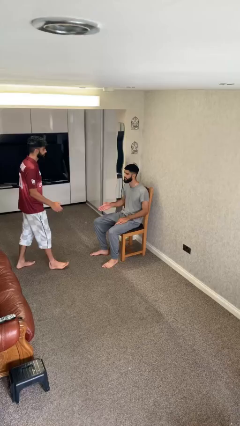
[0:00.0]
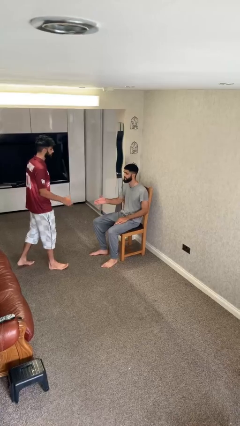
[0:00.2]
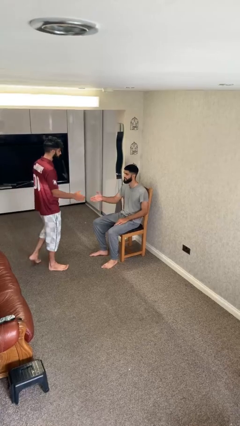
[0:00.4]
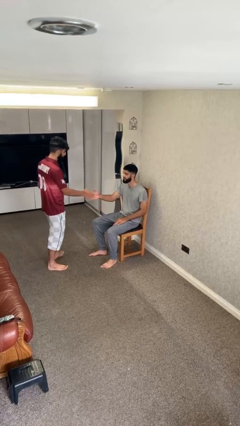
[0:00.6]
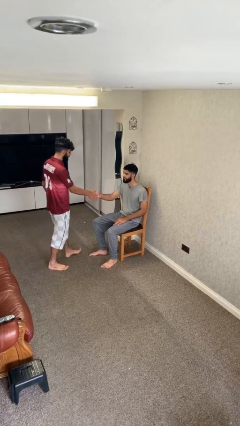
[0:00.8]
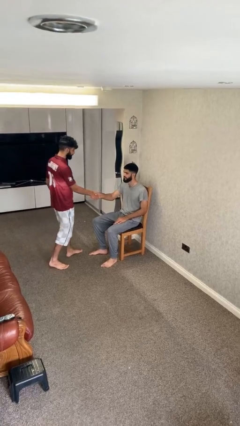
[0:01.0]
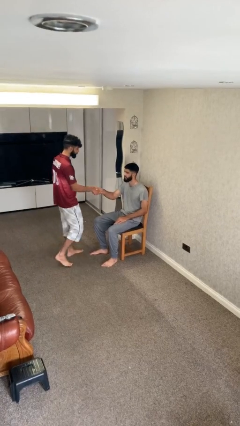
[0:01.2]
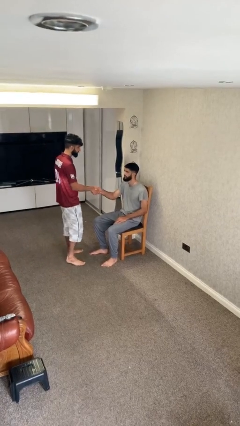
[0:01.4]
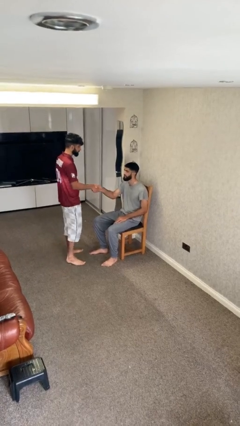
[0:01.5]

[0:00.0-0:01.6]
person shakes hand

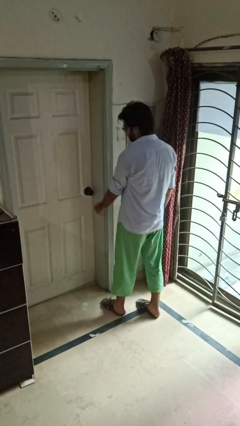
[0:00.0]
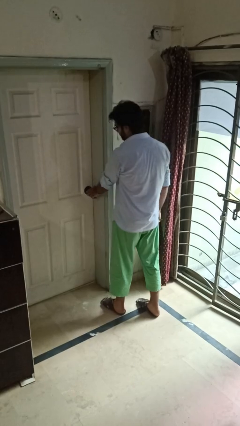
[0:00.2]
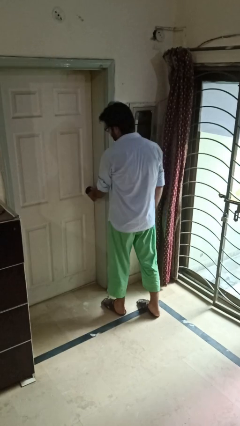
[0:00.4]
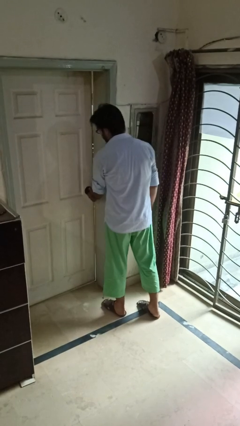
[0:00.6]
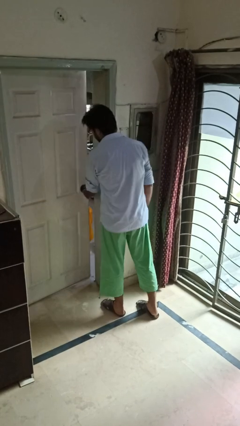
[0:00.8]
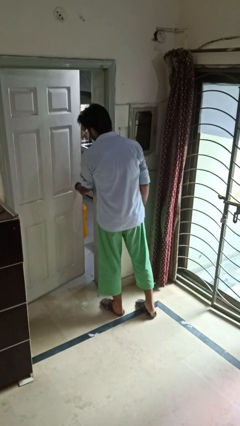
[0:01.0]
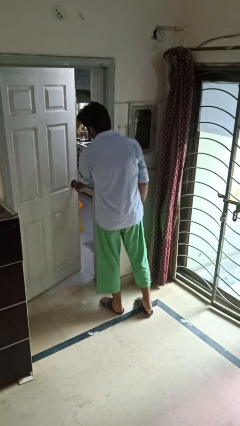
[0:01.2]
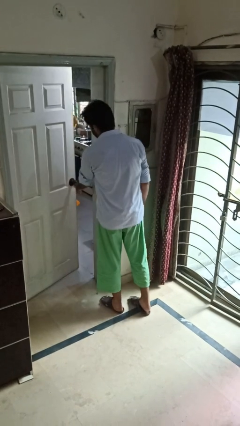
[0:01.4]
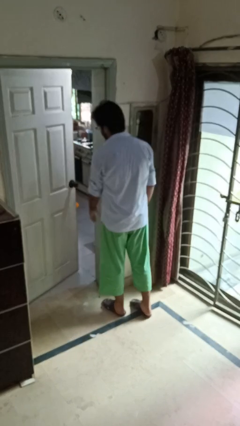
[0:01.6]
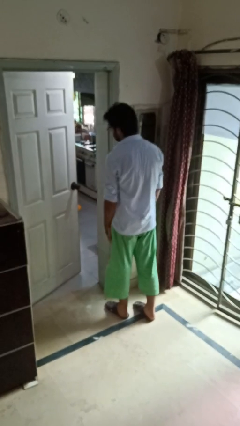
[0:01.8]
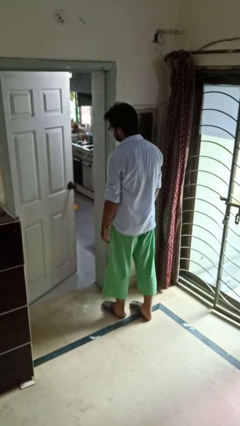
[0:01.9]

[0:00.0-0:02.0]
person opens facility door

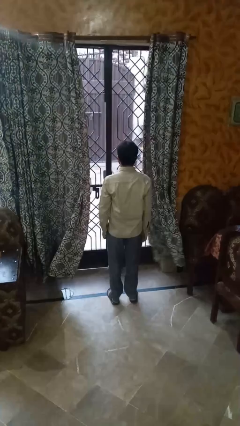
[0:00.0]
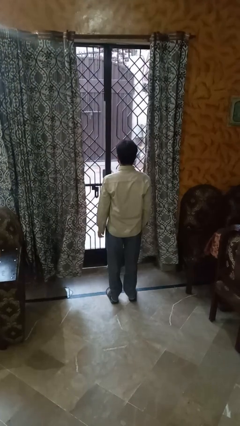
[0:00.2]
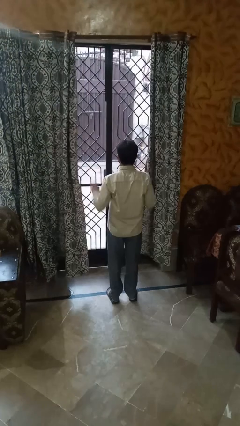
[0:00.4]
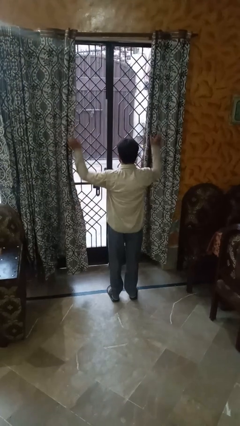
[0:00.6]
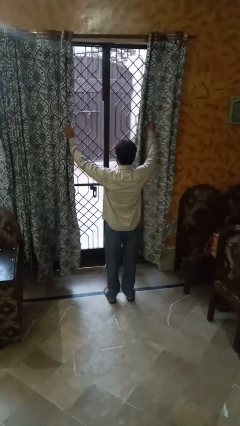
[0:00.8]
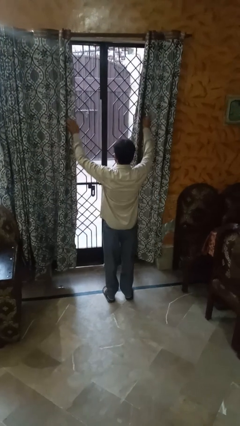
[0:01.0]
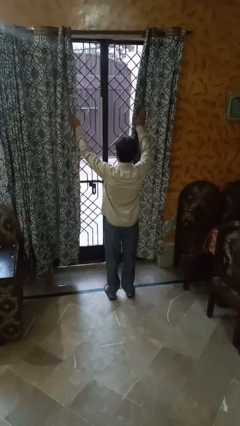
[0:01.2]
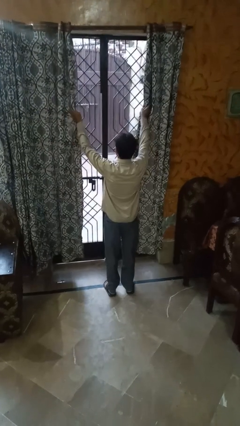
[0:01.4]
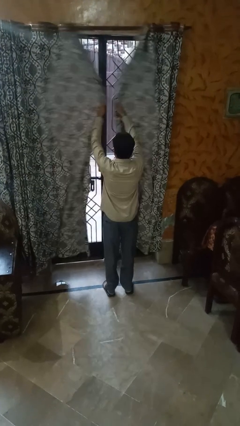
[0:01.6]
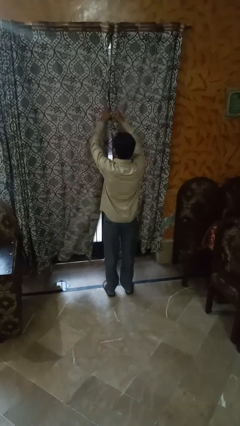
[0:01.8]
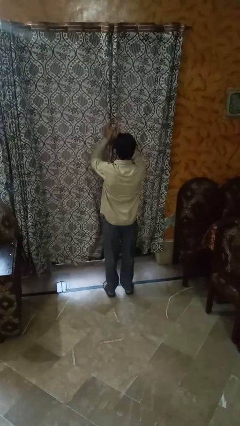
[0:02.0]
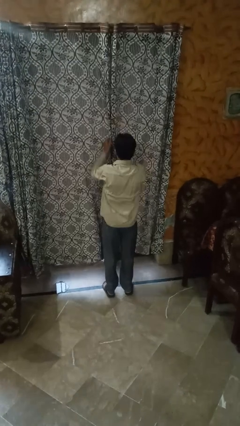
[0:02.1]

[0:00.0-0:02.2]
person closes curtains

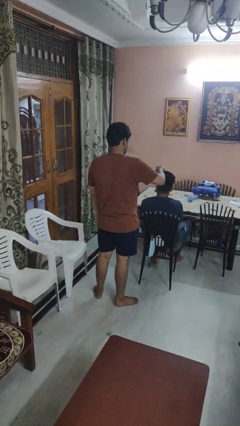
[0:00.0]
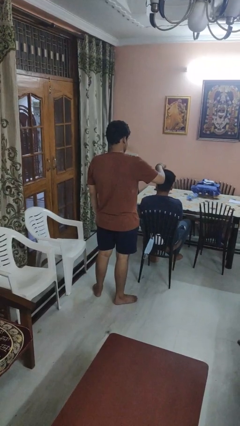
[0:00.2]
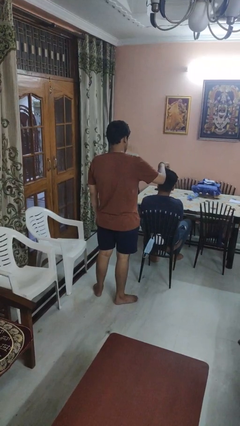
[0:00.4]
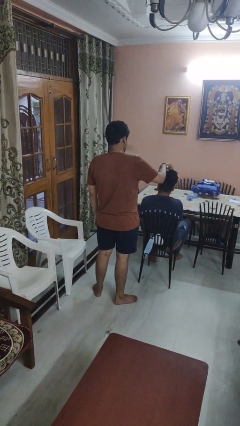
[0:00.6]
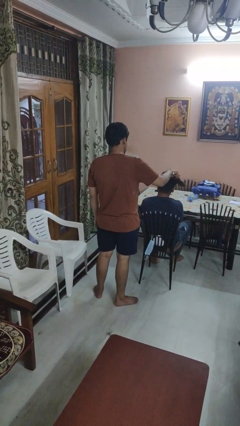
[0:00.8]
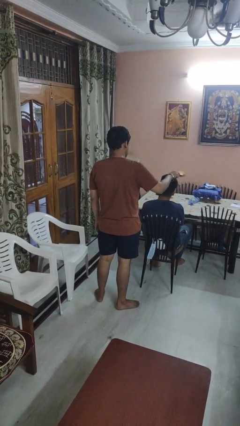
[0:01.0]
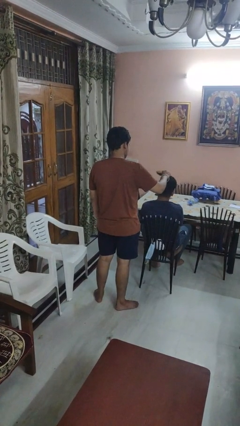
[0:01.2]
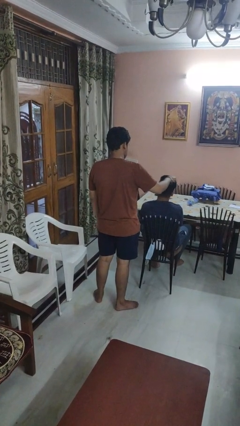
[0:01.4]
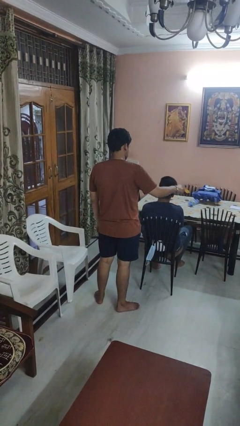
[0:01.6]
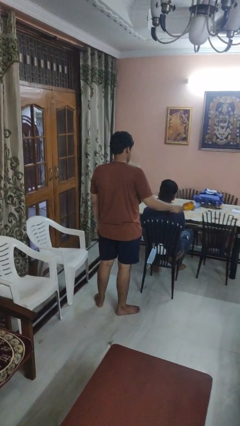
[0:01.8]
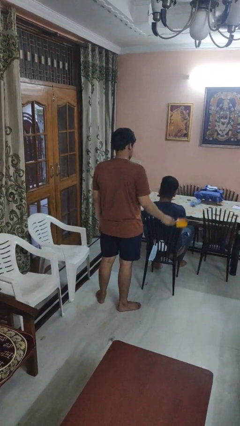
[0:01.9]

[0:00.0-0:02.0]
person brushes hair of person

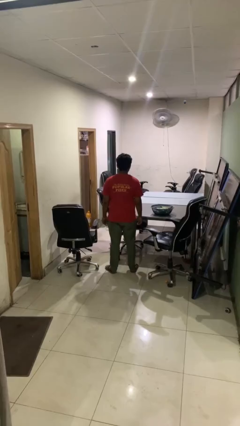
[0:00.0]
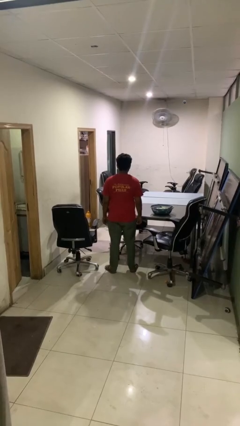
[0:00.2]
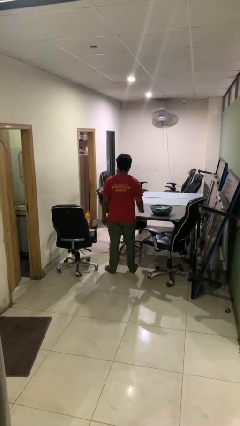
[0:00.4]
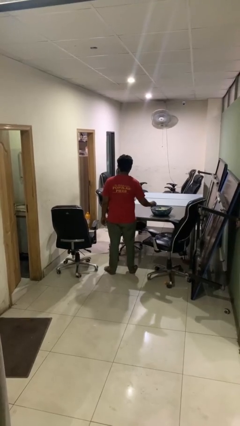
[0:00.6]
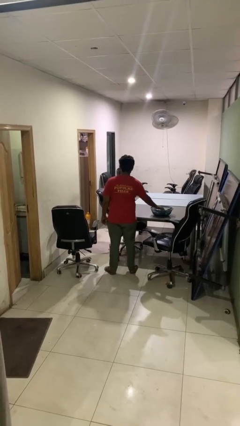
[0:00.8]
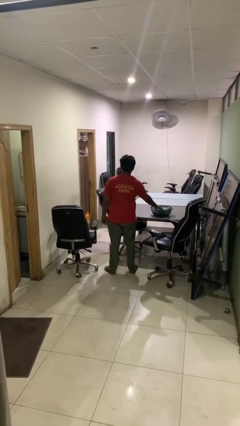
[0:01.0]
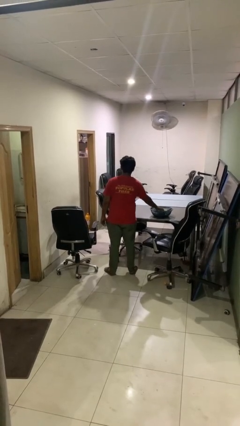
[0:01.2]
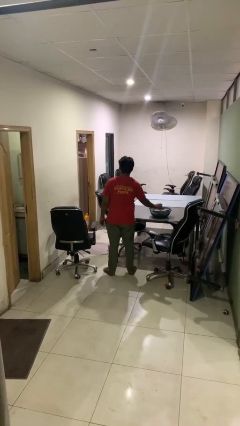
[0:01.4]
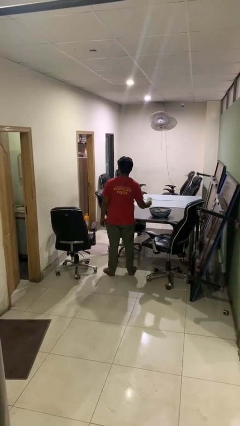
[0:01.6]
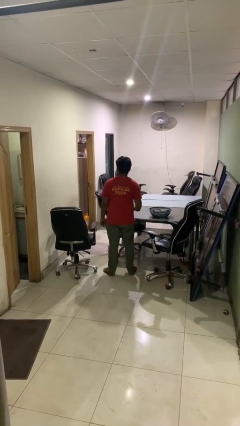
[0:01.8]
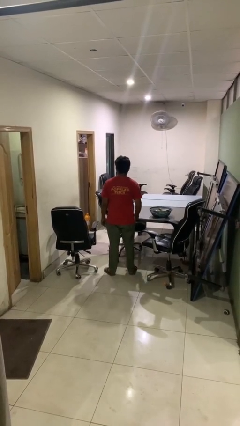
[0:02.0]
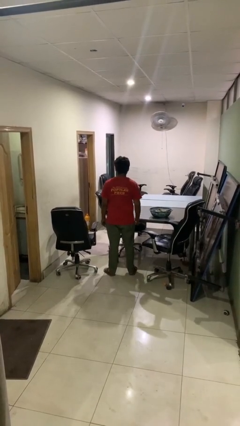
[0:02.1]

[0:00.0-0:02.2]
person takes object from basket

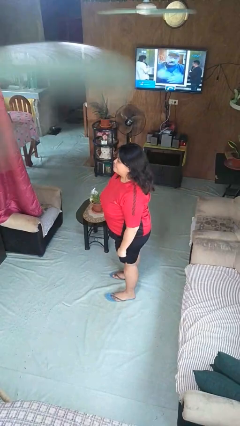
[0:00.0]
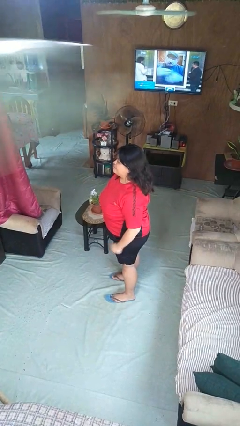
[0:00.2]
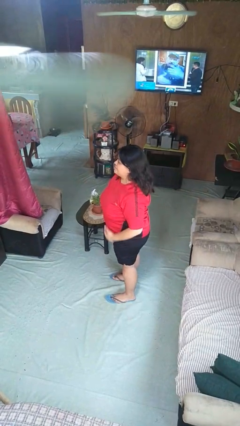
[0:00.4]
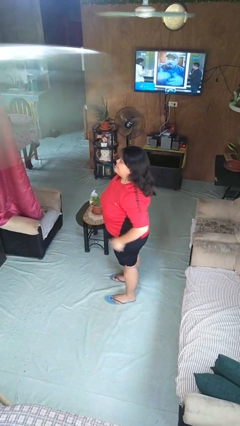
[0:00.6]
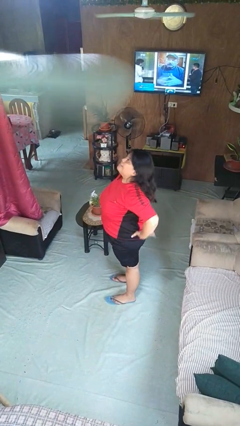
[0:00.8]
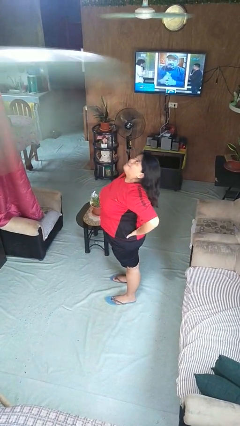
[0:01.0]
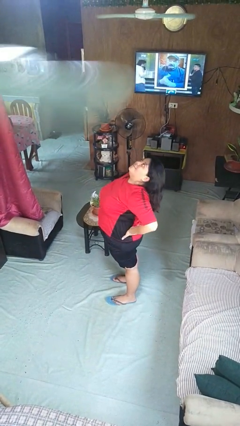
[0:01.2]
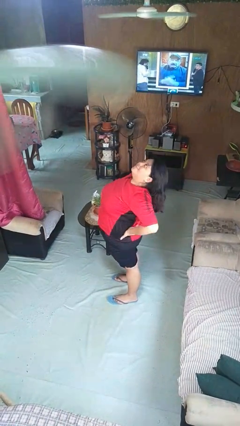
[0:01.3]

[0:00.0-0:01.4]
person stretches back

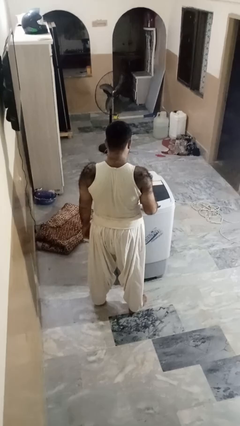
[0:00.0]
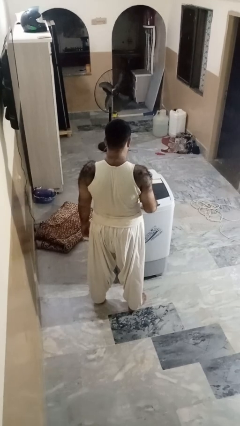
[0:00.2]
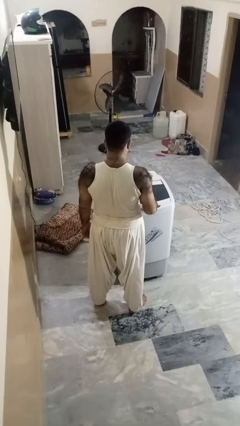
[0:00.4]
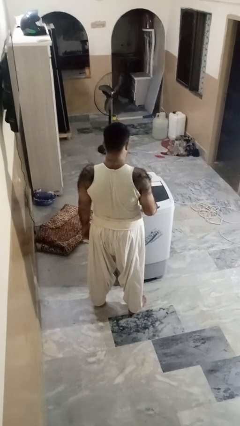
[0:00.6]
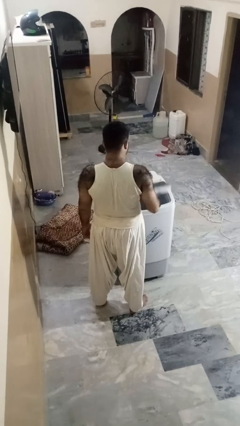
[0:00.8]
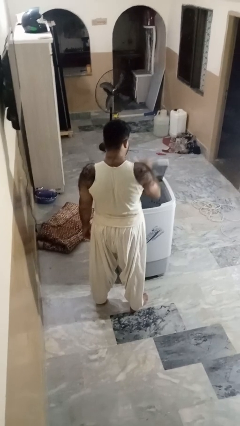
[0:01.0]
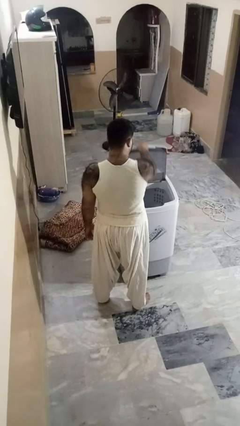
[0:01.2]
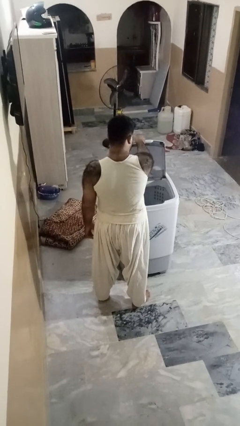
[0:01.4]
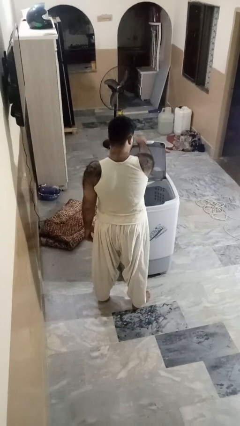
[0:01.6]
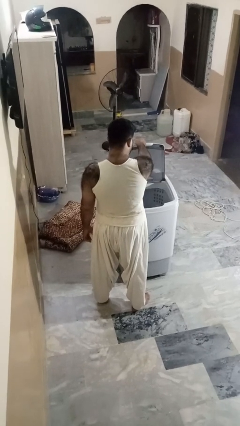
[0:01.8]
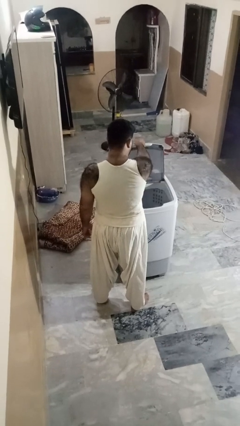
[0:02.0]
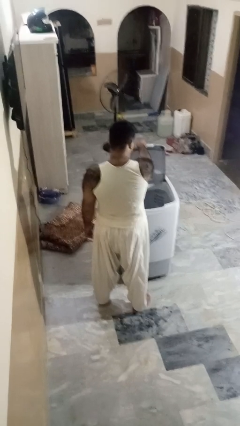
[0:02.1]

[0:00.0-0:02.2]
person opens clothes washer

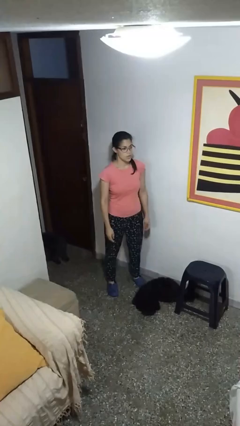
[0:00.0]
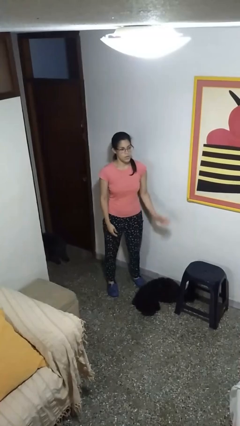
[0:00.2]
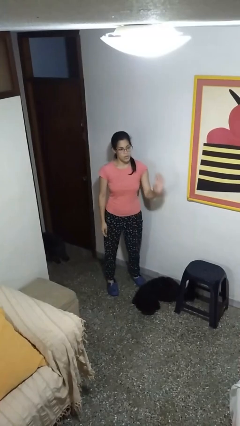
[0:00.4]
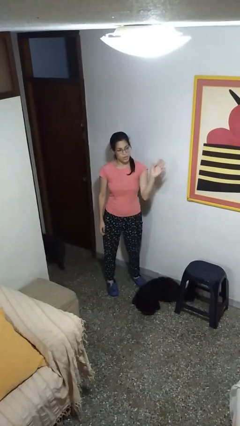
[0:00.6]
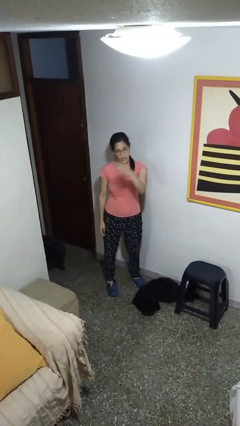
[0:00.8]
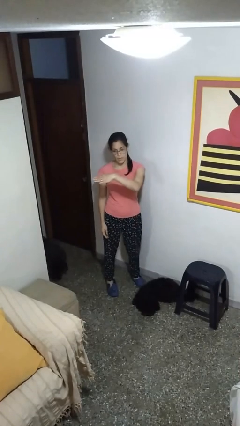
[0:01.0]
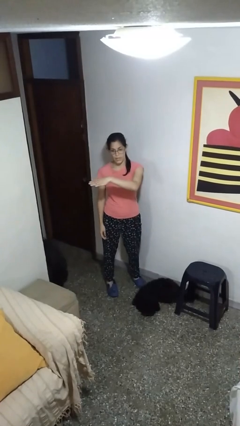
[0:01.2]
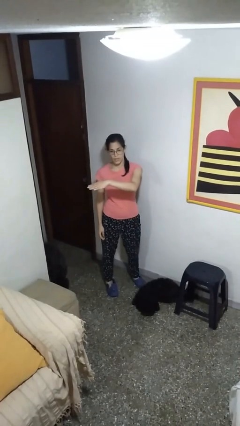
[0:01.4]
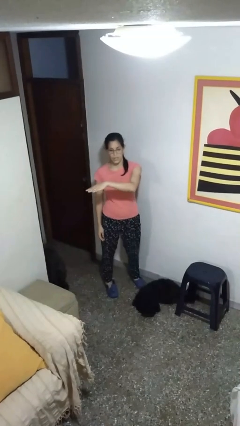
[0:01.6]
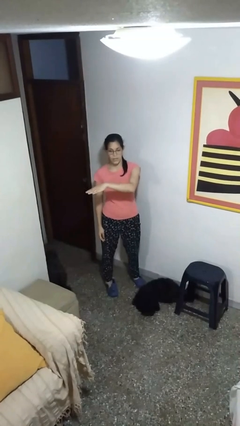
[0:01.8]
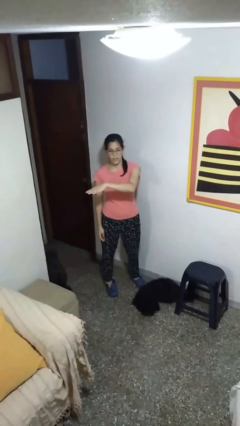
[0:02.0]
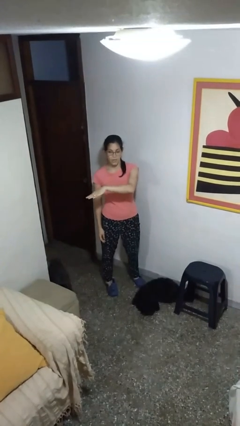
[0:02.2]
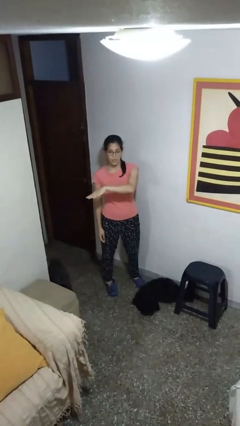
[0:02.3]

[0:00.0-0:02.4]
person gestures swipe right

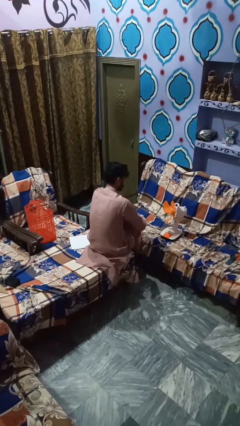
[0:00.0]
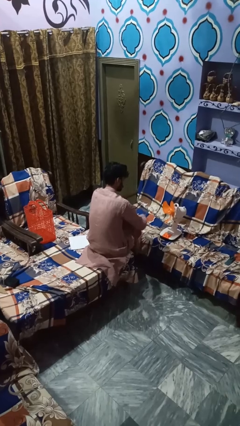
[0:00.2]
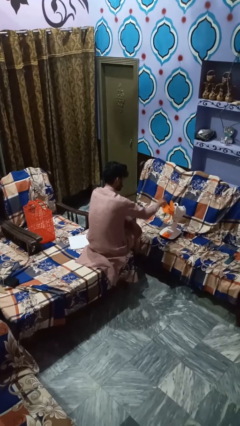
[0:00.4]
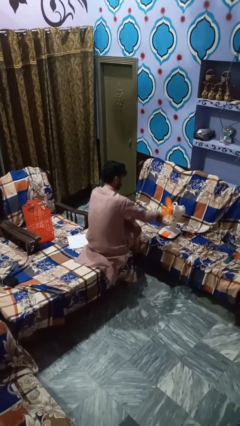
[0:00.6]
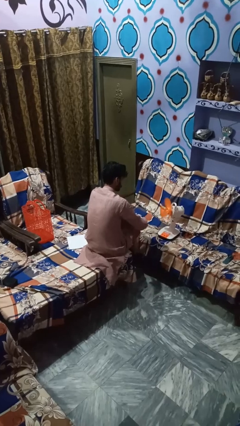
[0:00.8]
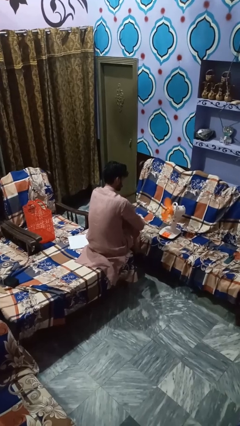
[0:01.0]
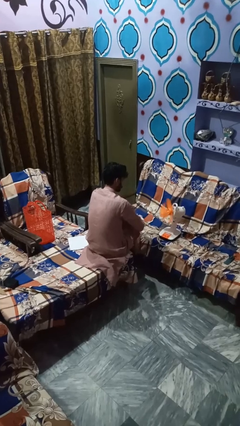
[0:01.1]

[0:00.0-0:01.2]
person turns on fan
